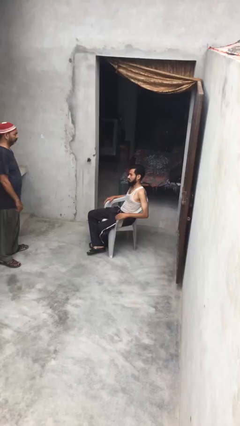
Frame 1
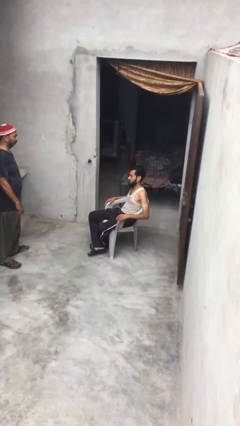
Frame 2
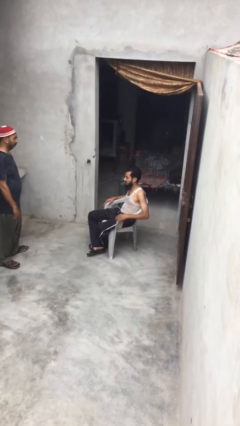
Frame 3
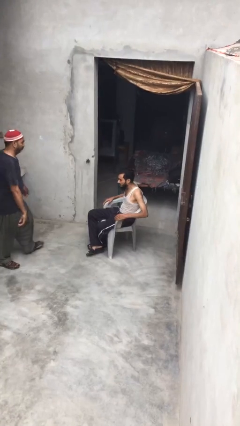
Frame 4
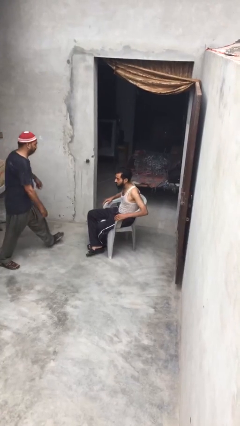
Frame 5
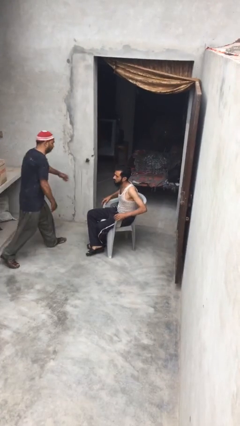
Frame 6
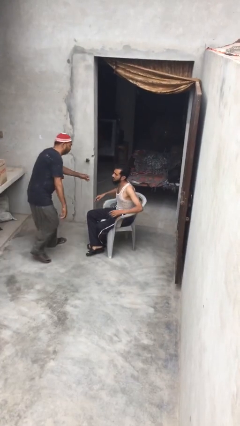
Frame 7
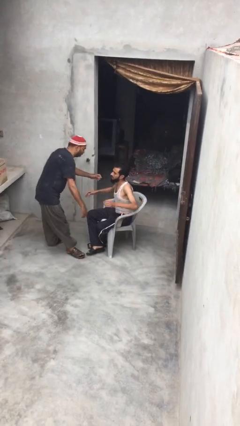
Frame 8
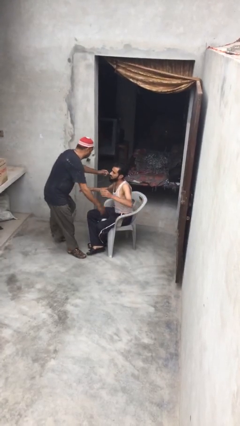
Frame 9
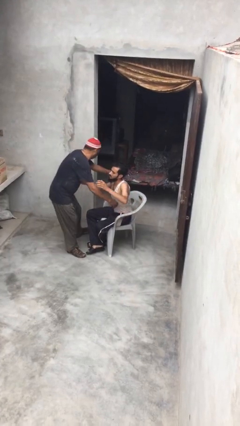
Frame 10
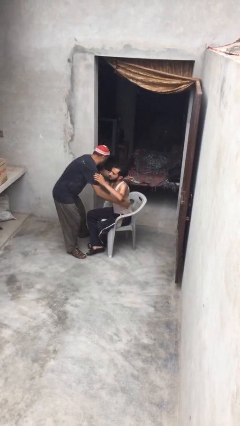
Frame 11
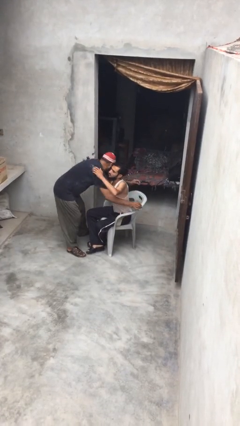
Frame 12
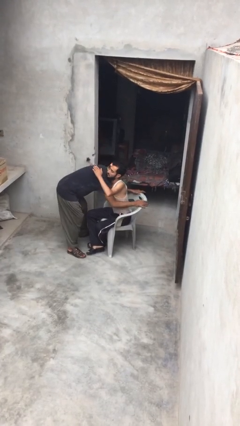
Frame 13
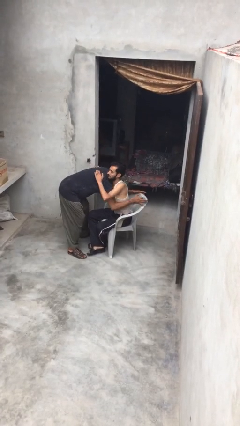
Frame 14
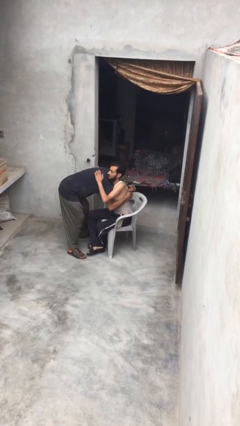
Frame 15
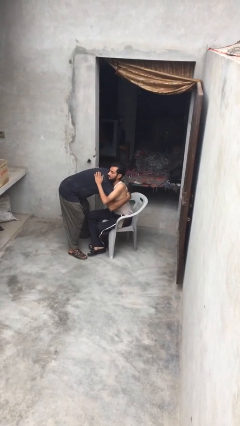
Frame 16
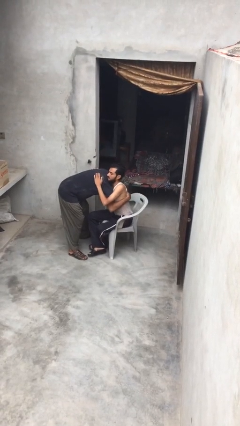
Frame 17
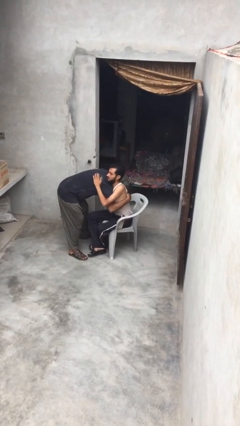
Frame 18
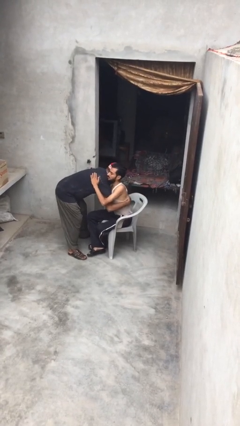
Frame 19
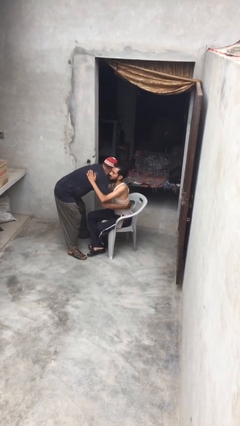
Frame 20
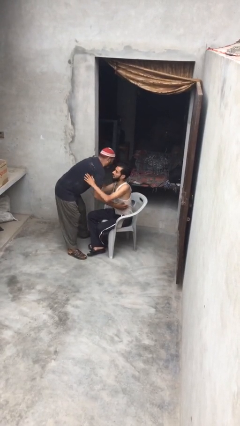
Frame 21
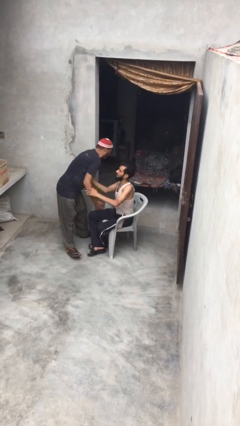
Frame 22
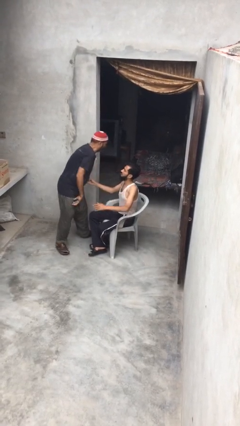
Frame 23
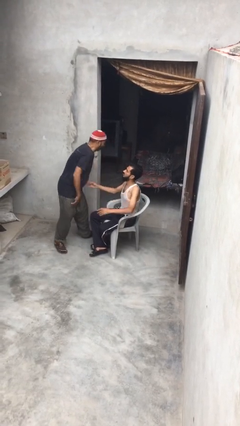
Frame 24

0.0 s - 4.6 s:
person embraces person

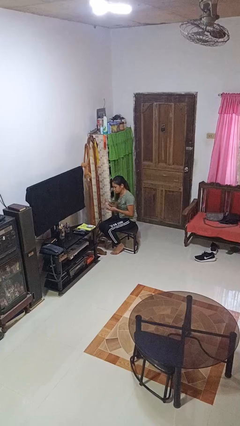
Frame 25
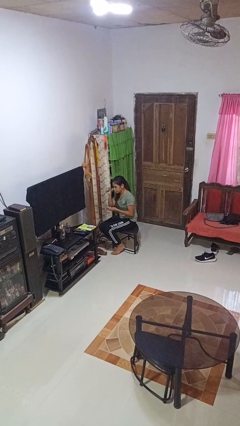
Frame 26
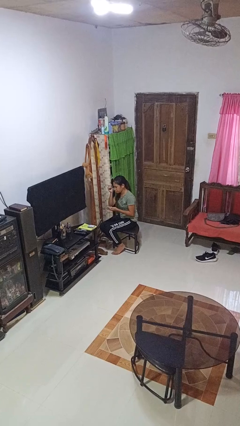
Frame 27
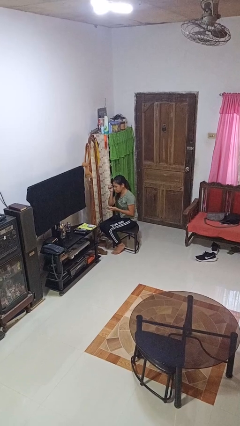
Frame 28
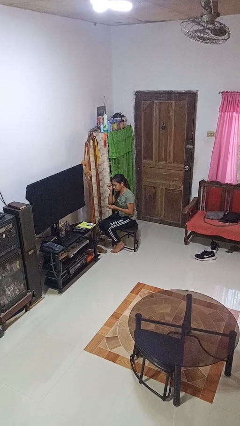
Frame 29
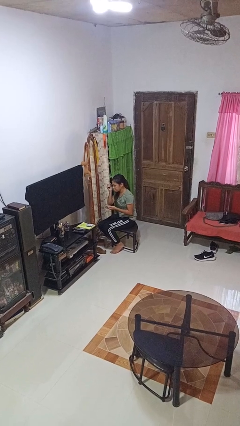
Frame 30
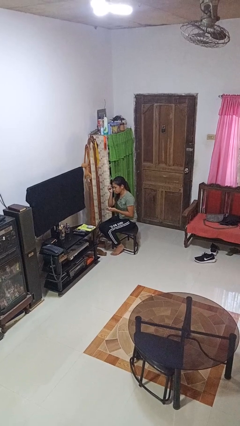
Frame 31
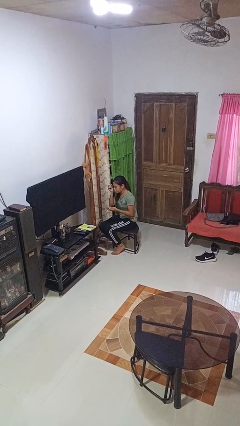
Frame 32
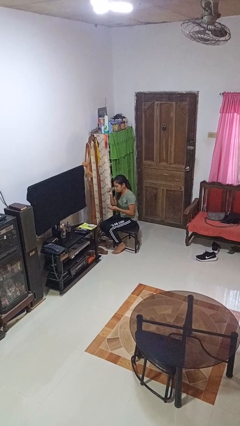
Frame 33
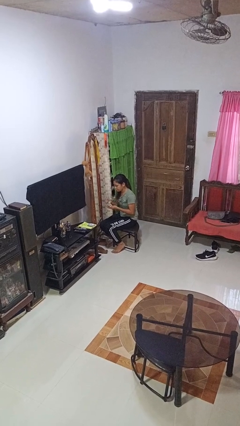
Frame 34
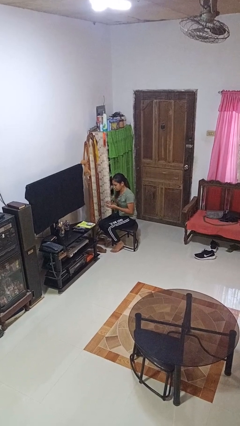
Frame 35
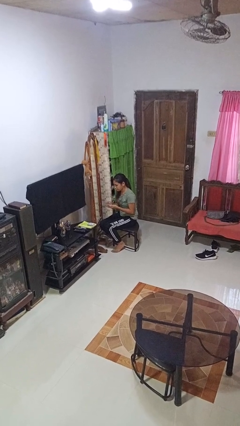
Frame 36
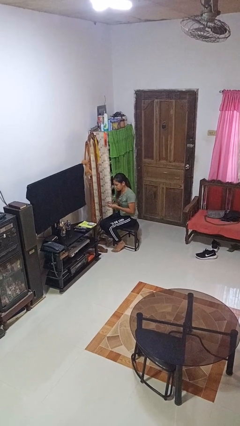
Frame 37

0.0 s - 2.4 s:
person applies eye makeup

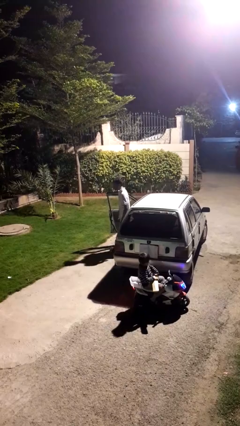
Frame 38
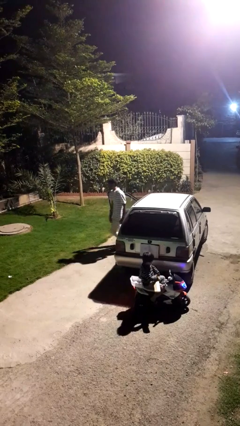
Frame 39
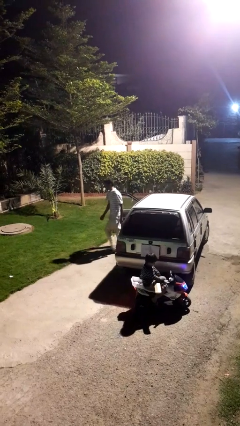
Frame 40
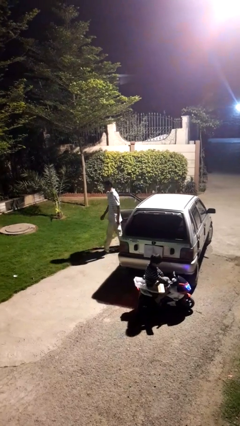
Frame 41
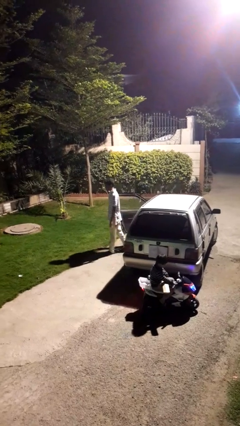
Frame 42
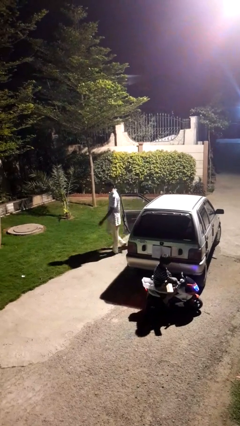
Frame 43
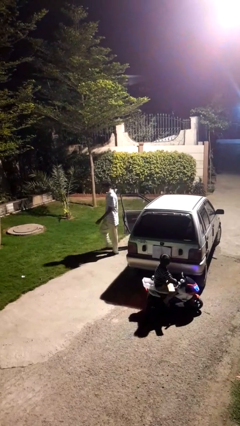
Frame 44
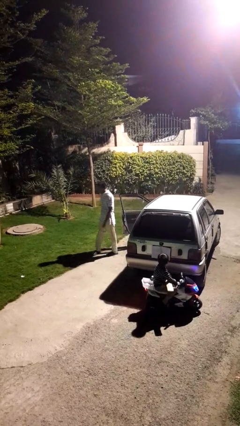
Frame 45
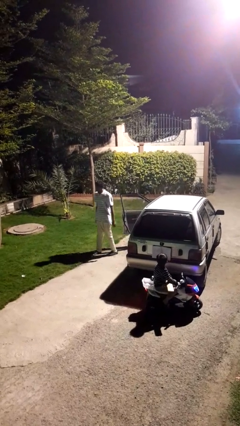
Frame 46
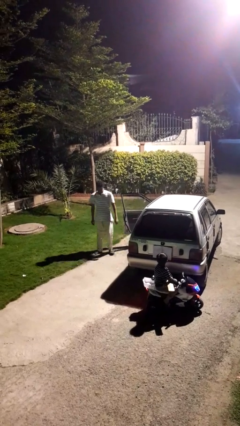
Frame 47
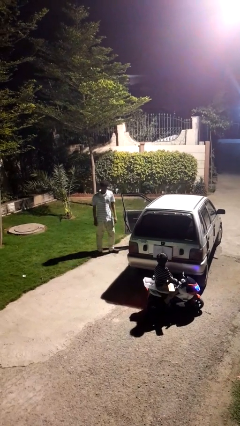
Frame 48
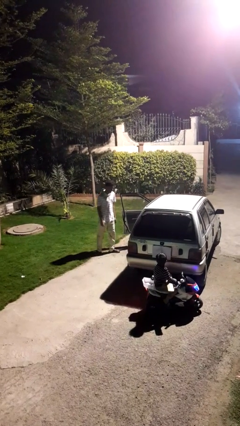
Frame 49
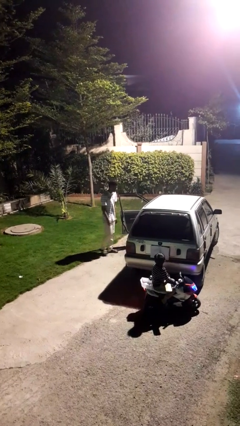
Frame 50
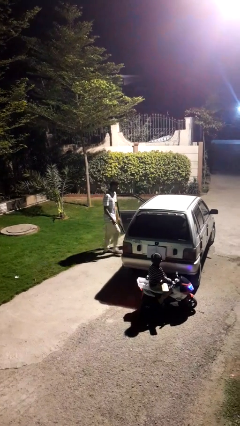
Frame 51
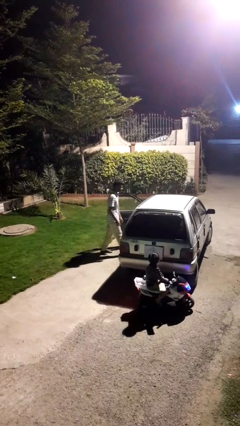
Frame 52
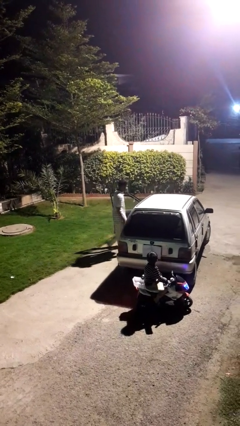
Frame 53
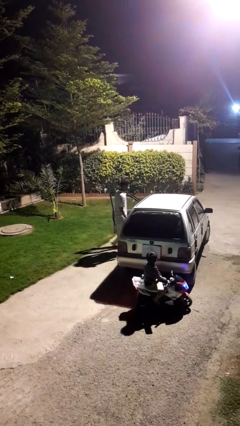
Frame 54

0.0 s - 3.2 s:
person exits car

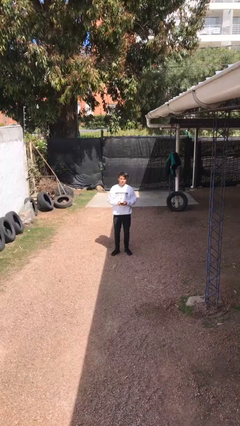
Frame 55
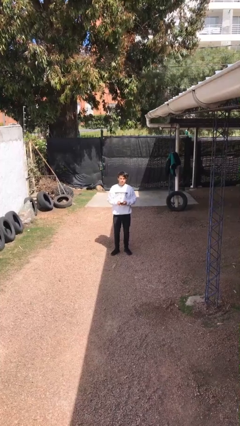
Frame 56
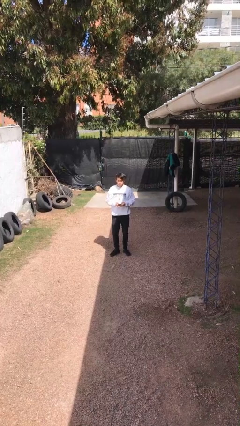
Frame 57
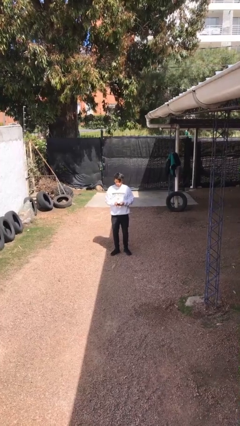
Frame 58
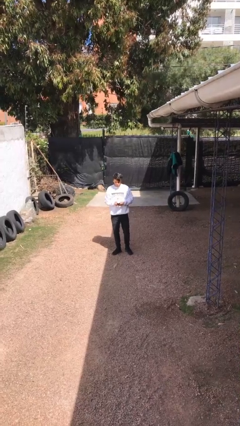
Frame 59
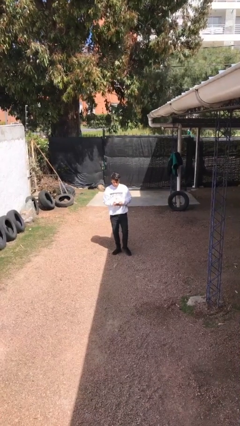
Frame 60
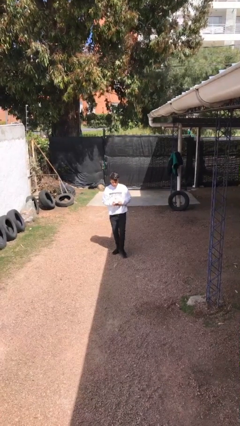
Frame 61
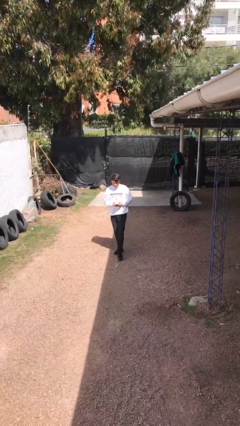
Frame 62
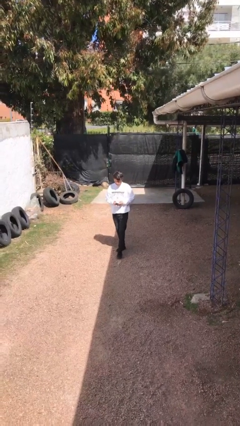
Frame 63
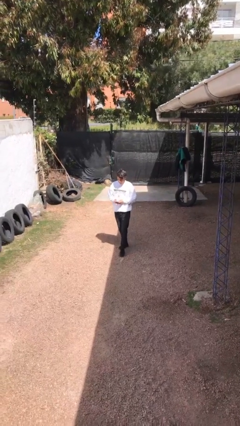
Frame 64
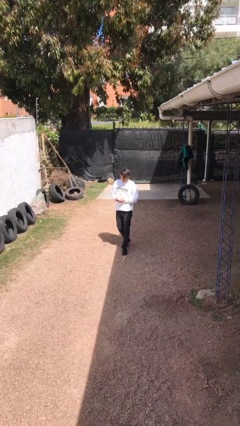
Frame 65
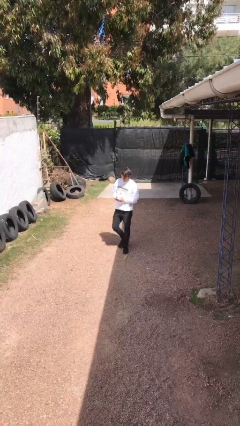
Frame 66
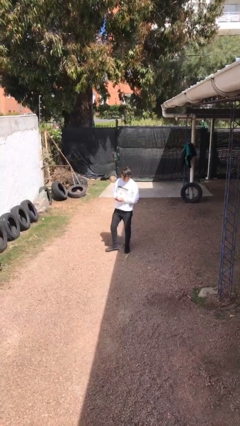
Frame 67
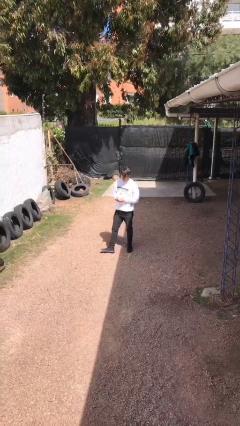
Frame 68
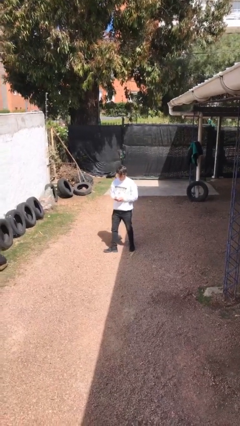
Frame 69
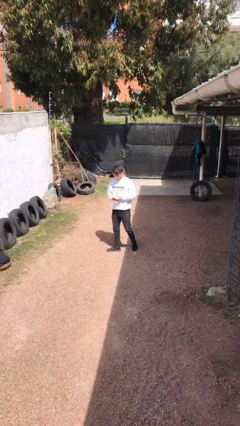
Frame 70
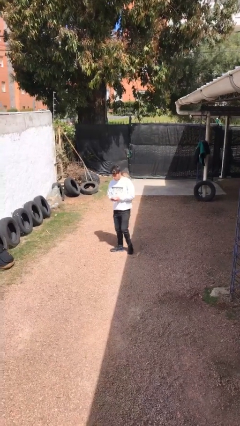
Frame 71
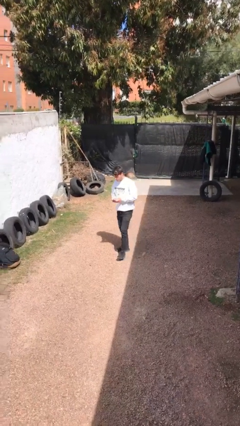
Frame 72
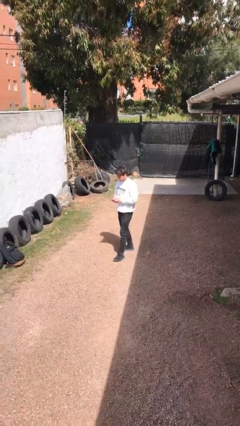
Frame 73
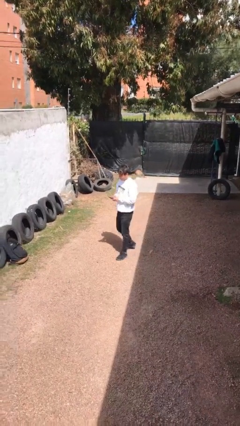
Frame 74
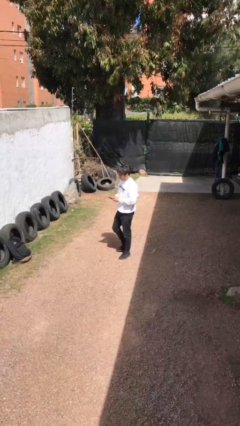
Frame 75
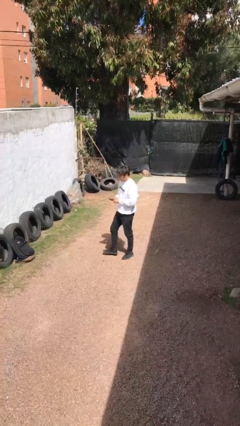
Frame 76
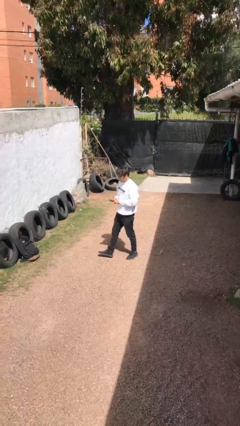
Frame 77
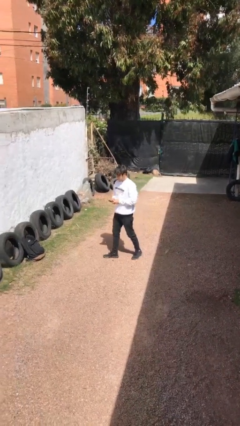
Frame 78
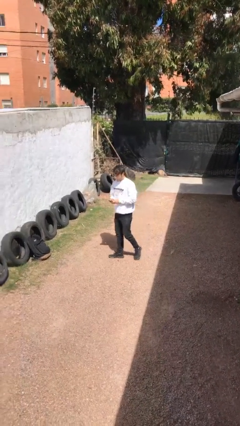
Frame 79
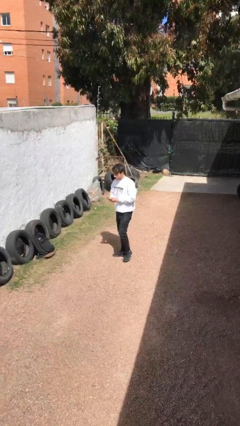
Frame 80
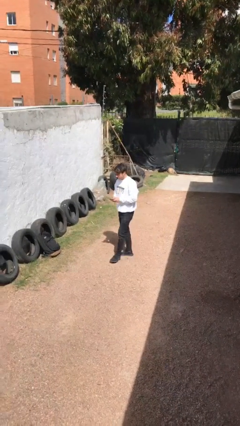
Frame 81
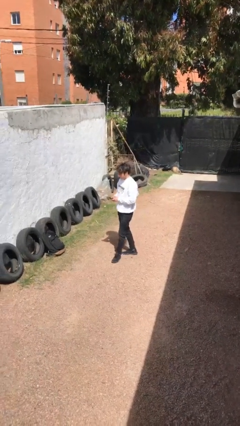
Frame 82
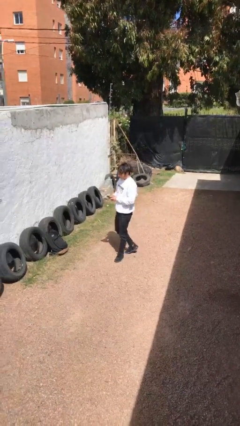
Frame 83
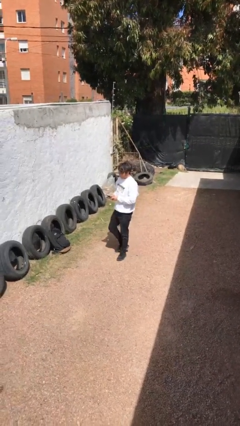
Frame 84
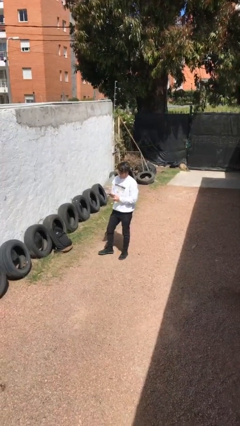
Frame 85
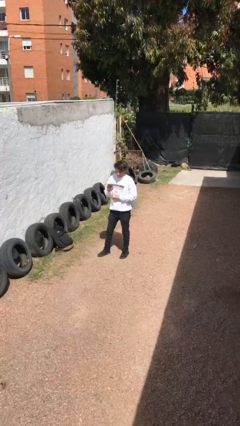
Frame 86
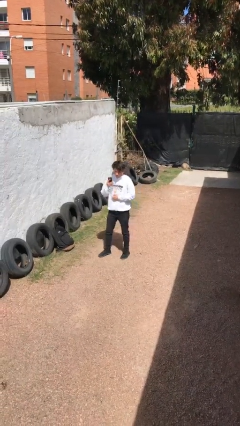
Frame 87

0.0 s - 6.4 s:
person texts on phone

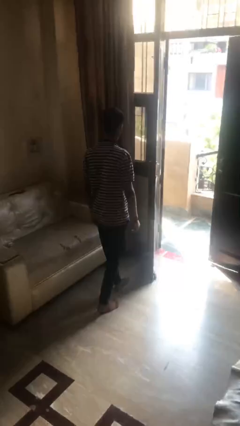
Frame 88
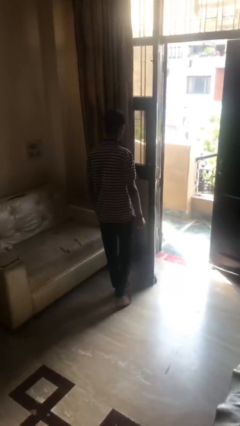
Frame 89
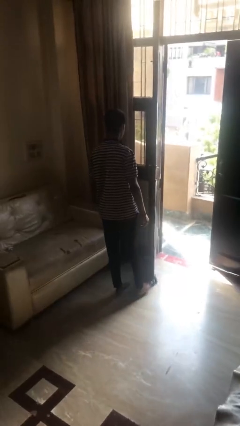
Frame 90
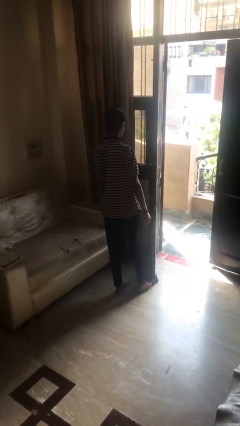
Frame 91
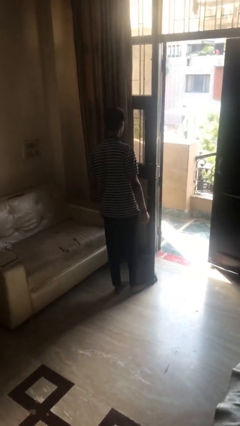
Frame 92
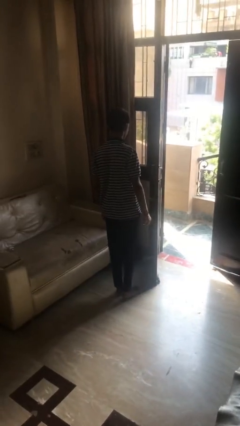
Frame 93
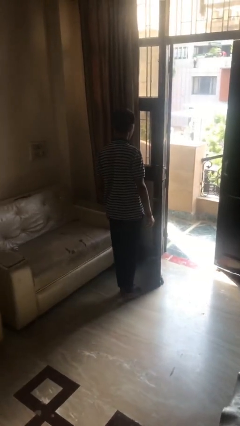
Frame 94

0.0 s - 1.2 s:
person stubs toe
